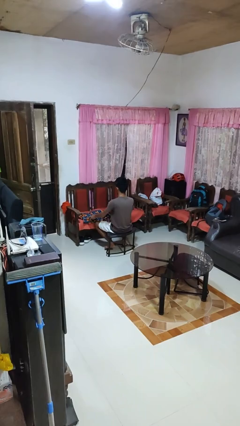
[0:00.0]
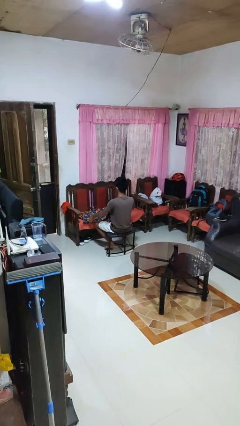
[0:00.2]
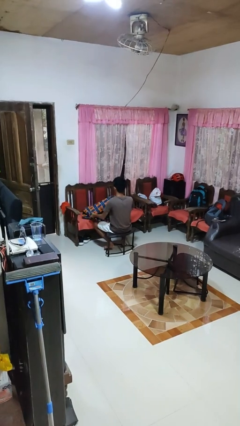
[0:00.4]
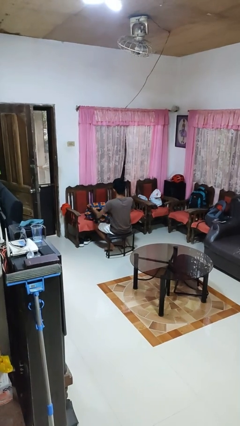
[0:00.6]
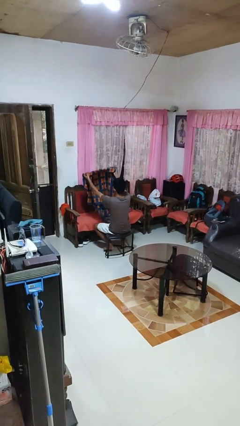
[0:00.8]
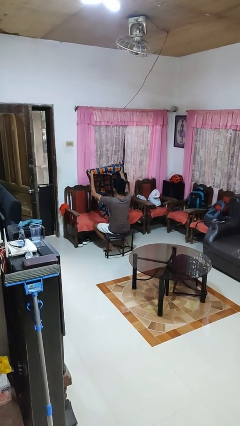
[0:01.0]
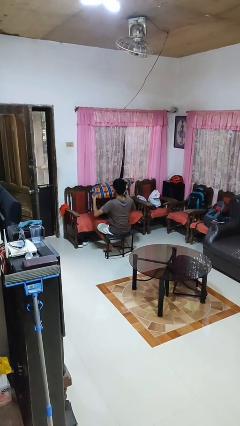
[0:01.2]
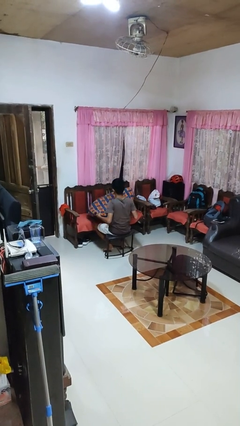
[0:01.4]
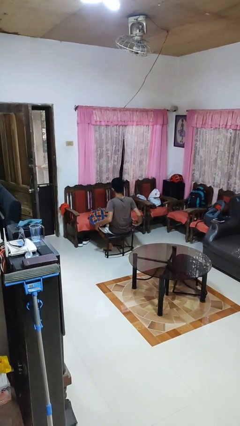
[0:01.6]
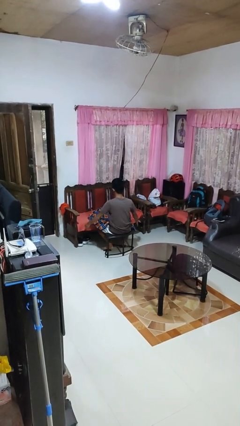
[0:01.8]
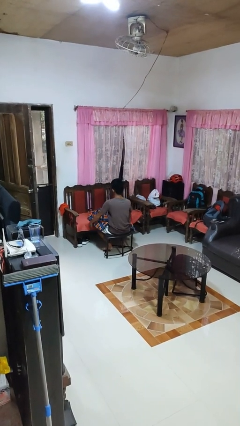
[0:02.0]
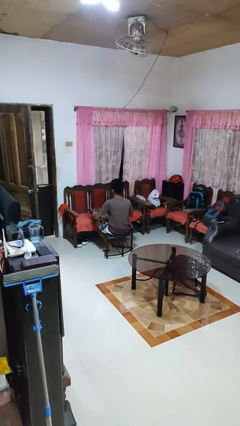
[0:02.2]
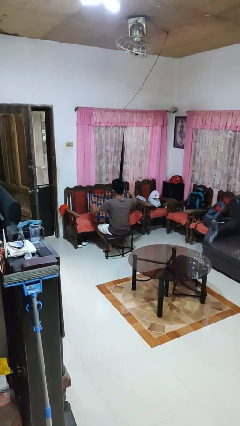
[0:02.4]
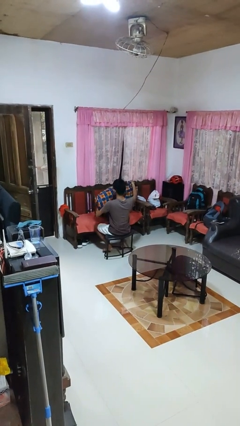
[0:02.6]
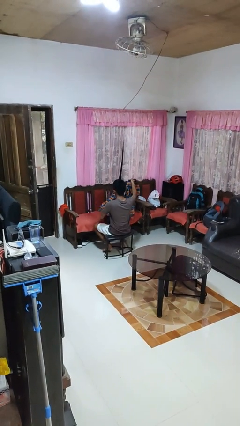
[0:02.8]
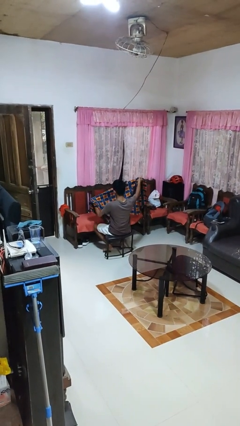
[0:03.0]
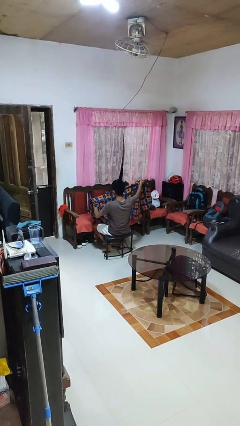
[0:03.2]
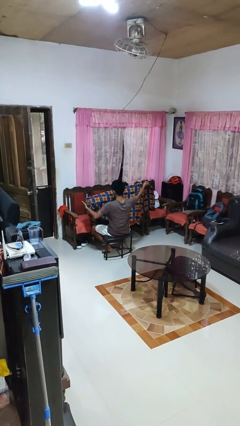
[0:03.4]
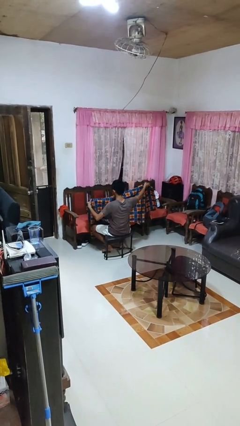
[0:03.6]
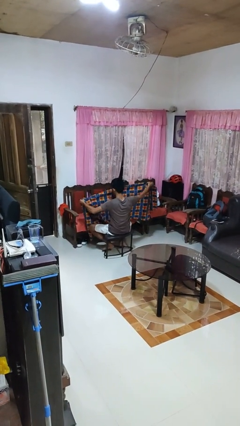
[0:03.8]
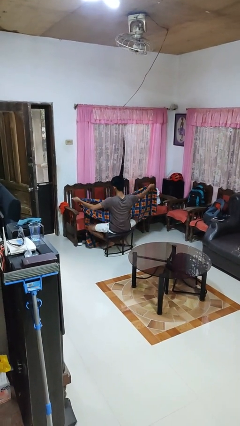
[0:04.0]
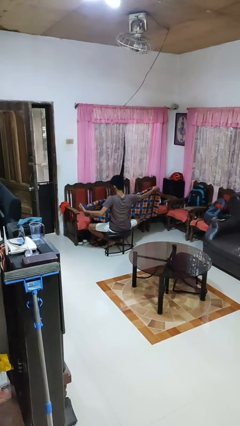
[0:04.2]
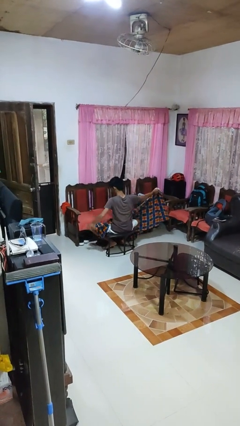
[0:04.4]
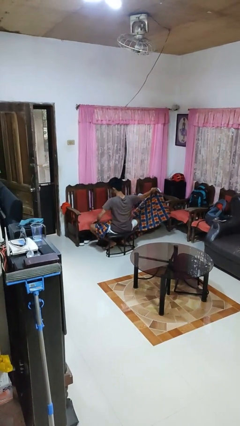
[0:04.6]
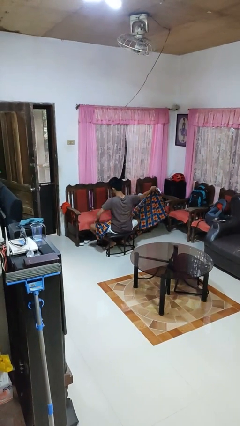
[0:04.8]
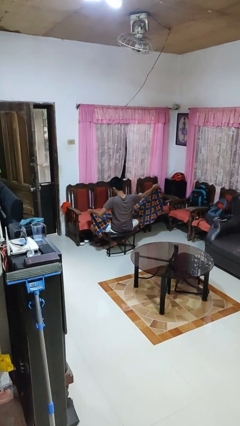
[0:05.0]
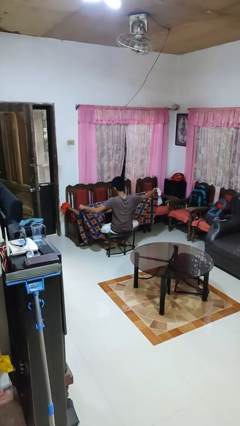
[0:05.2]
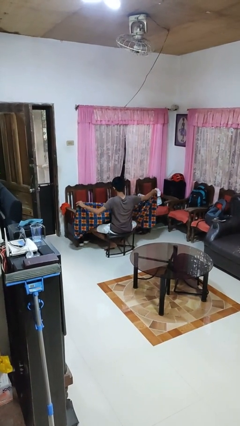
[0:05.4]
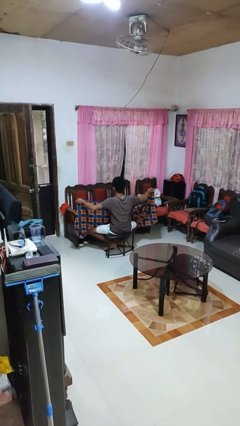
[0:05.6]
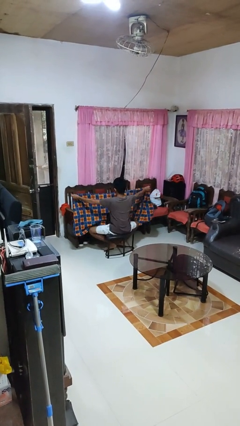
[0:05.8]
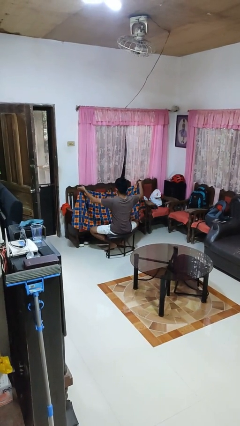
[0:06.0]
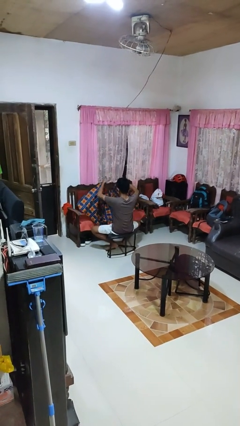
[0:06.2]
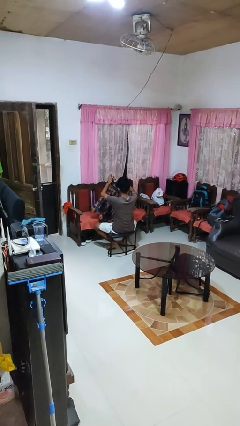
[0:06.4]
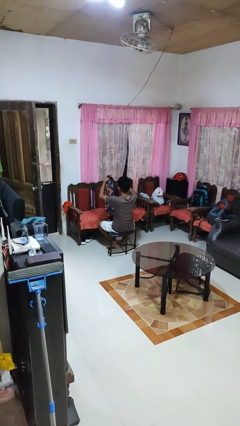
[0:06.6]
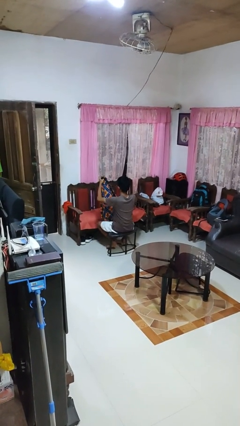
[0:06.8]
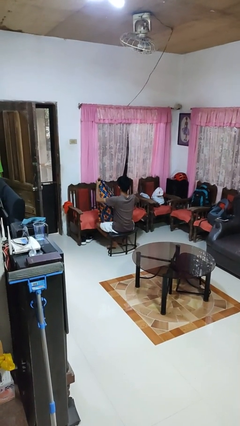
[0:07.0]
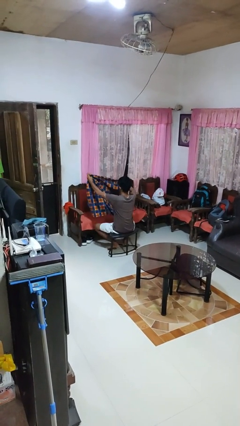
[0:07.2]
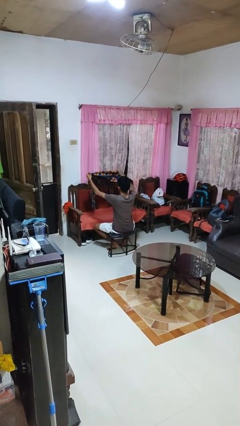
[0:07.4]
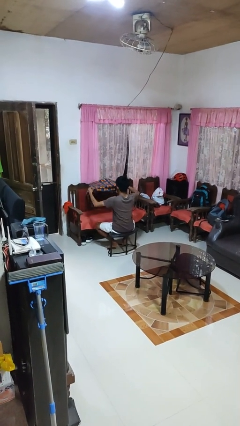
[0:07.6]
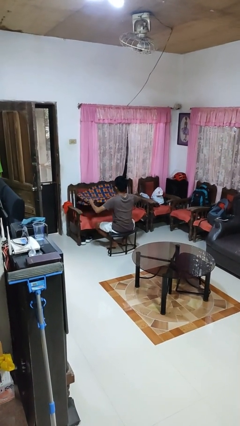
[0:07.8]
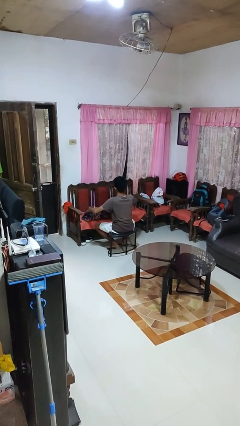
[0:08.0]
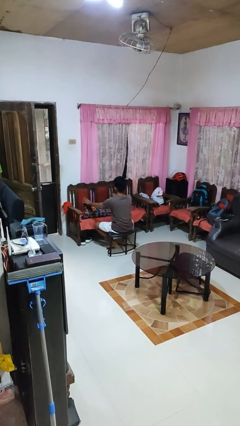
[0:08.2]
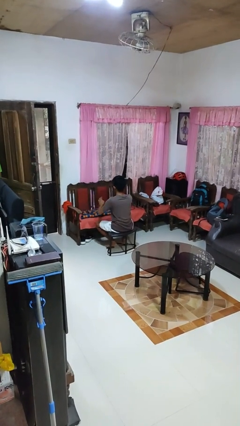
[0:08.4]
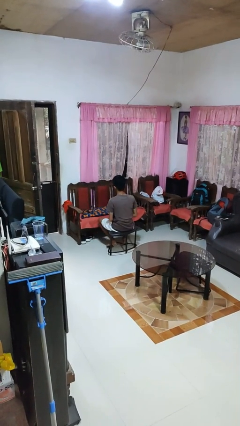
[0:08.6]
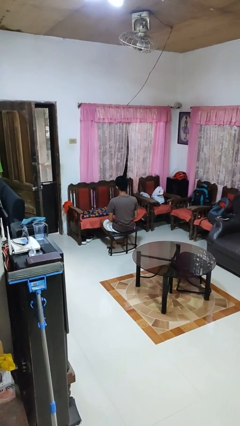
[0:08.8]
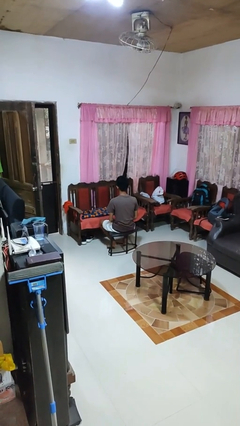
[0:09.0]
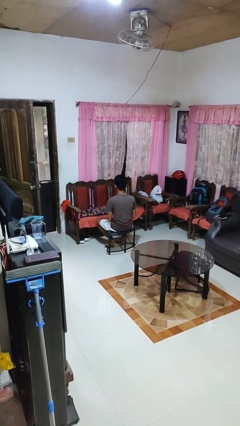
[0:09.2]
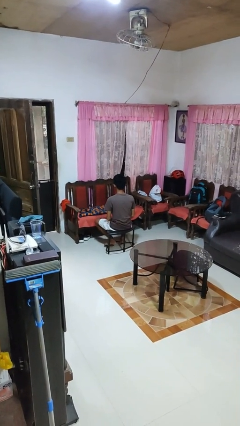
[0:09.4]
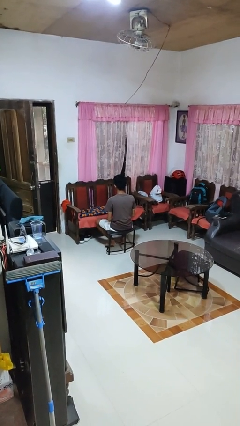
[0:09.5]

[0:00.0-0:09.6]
person folds blanket

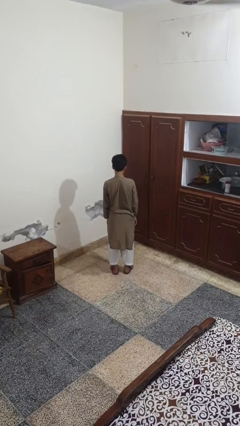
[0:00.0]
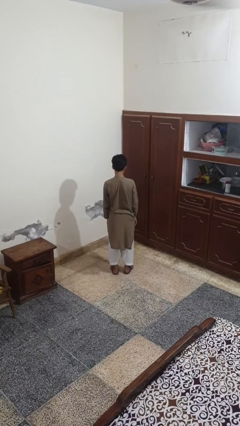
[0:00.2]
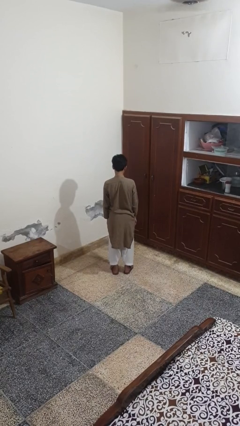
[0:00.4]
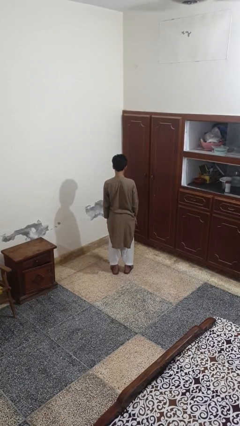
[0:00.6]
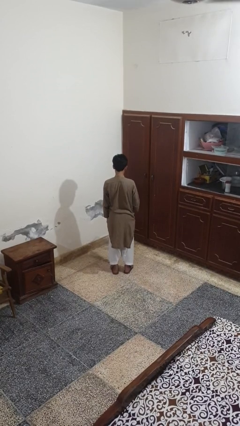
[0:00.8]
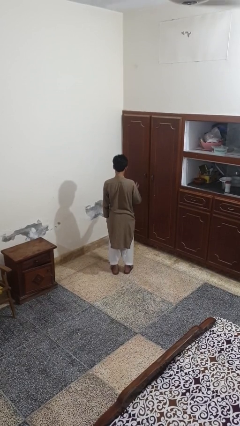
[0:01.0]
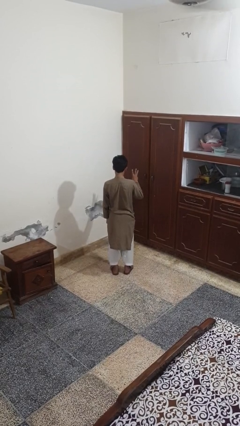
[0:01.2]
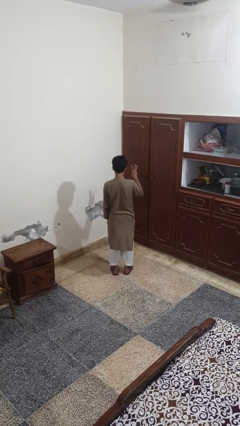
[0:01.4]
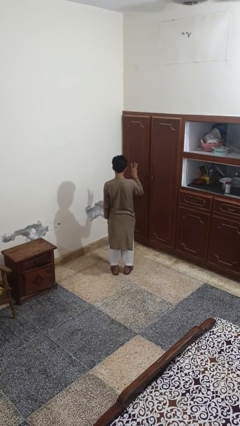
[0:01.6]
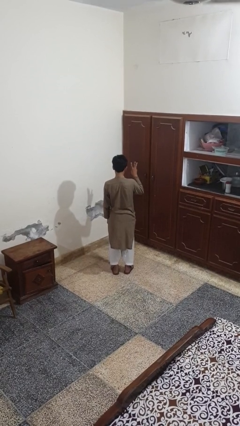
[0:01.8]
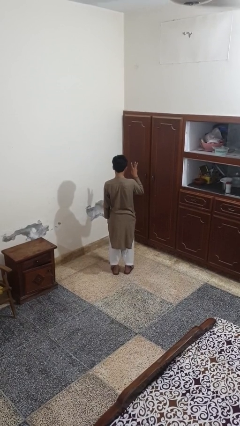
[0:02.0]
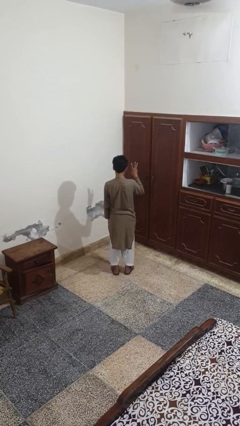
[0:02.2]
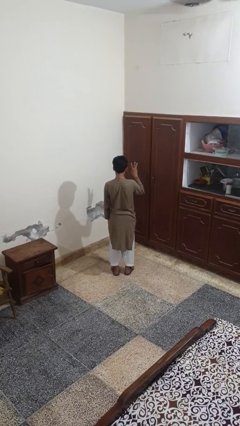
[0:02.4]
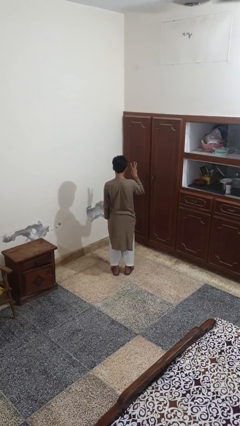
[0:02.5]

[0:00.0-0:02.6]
person gestures number three

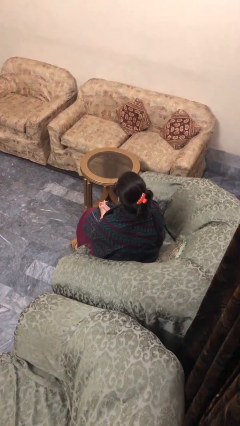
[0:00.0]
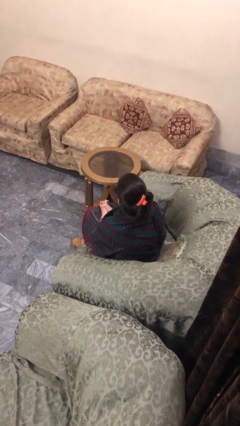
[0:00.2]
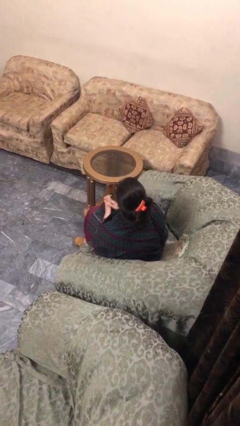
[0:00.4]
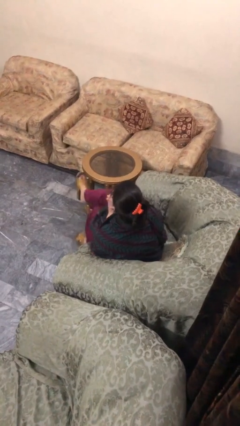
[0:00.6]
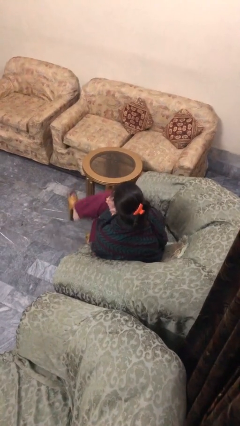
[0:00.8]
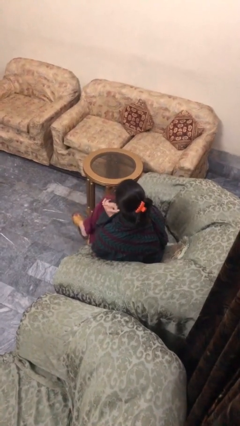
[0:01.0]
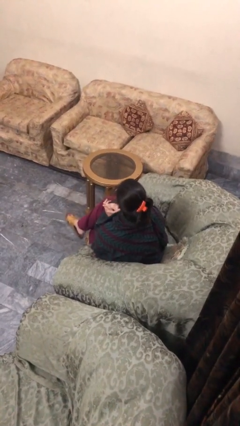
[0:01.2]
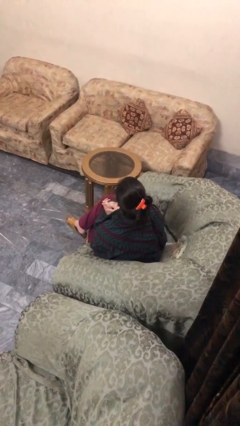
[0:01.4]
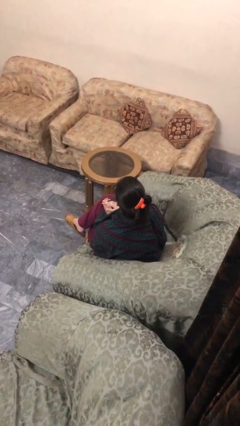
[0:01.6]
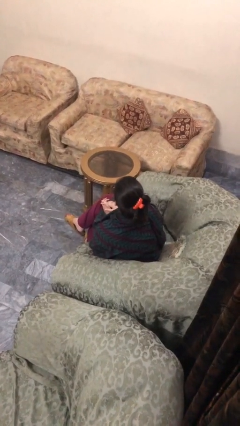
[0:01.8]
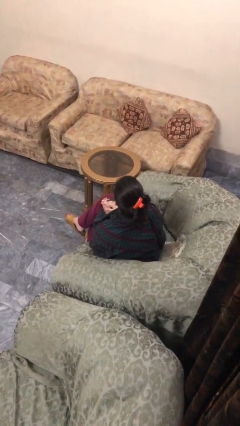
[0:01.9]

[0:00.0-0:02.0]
person crosses legs

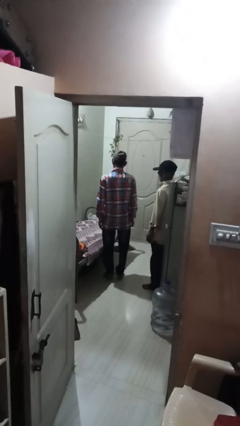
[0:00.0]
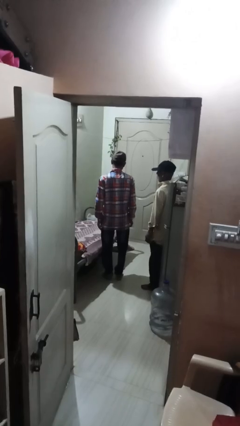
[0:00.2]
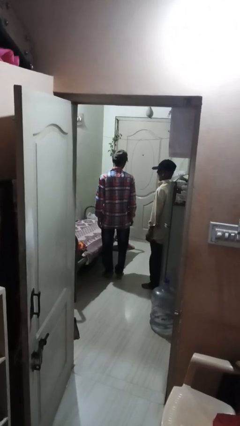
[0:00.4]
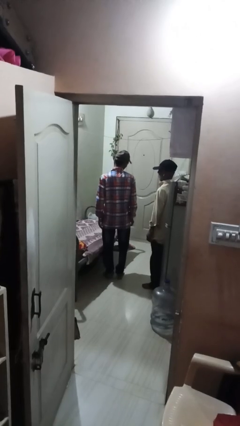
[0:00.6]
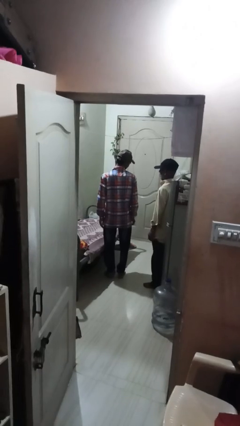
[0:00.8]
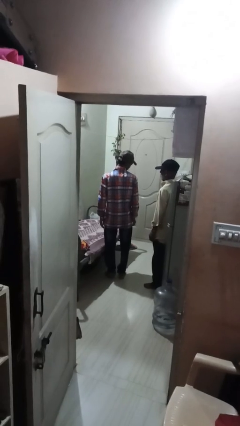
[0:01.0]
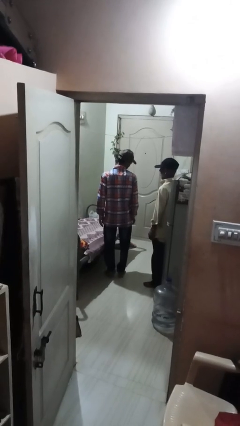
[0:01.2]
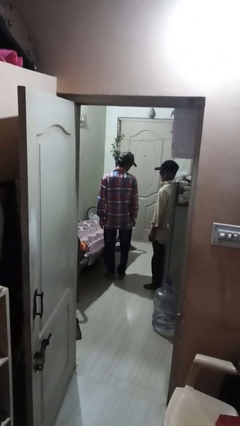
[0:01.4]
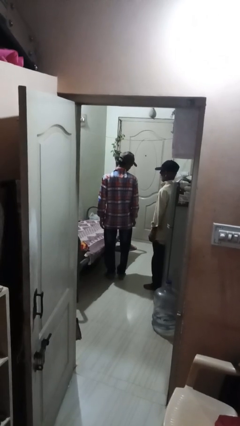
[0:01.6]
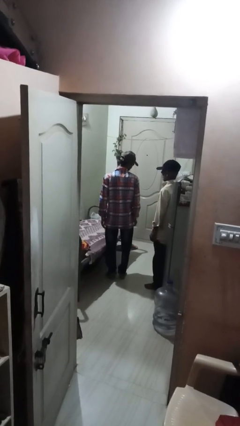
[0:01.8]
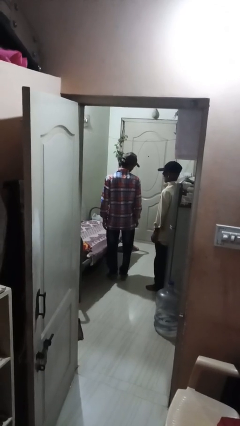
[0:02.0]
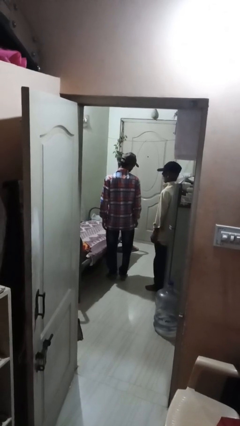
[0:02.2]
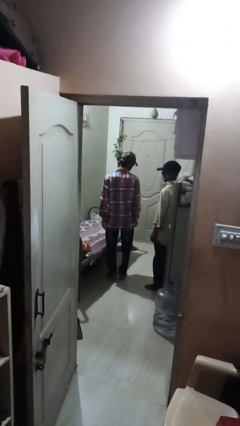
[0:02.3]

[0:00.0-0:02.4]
person looks over shoulder

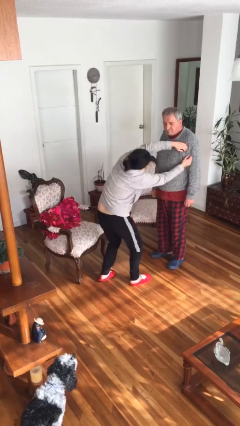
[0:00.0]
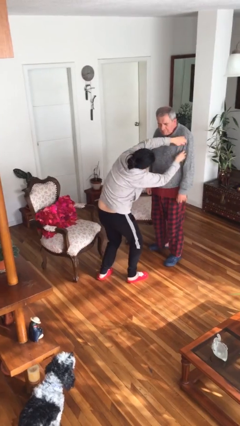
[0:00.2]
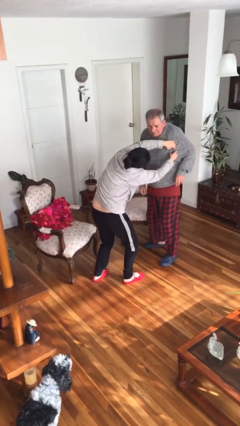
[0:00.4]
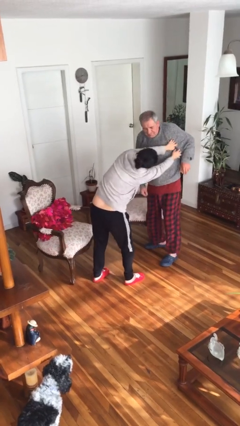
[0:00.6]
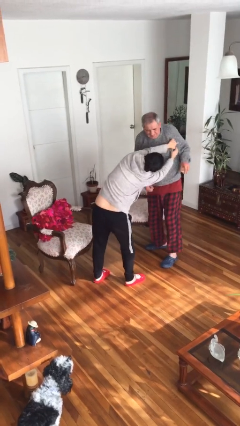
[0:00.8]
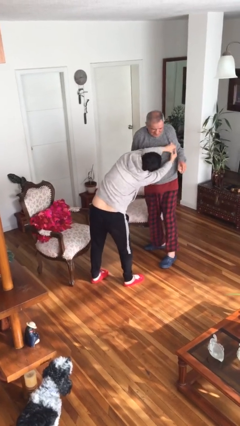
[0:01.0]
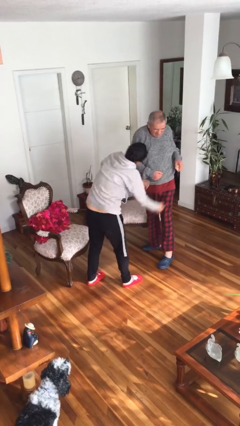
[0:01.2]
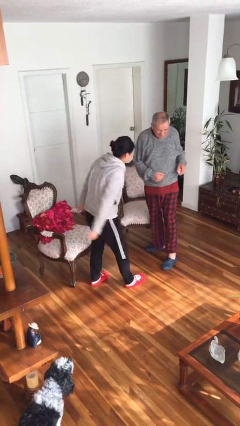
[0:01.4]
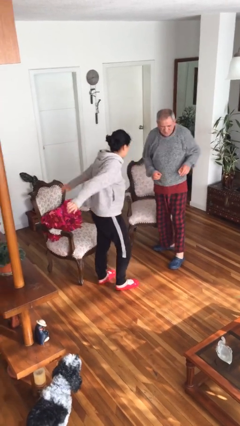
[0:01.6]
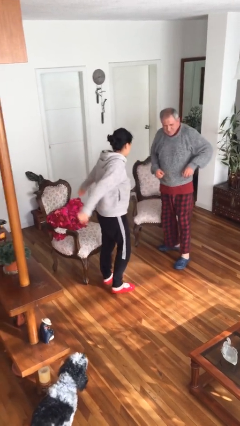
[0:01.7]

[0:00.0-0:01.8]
person tickles person
